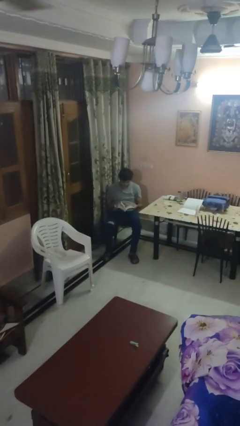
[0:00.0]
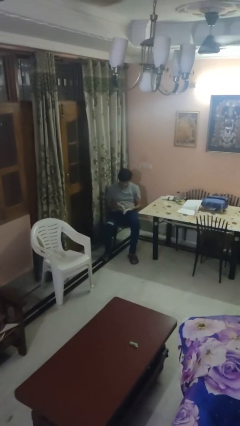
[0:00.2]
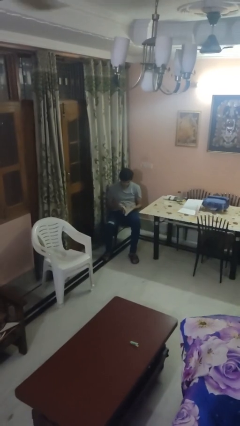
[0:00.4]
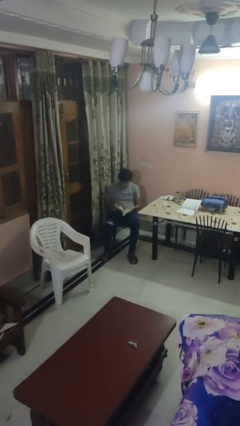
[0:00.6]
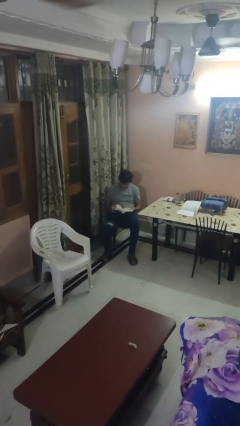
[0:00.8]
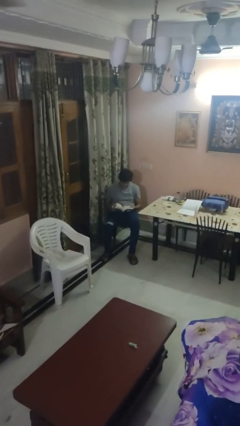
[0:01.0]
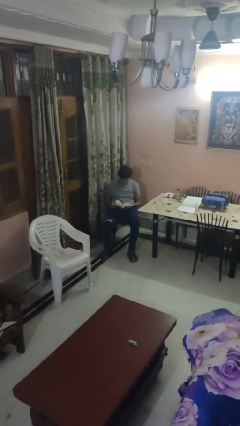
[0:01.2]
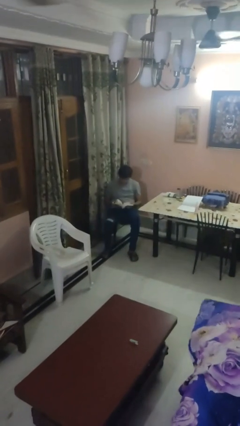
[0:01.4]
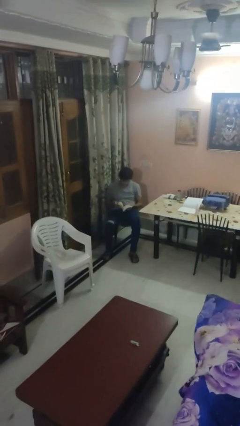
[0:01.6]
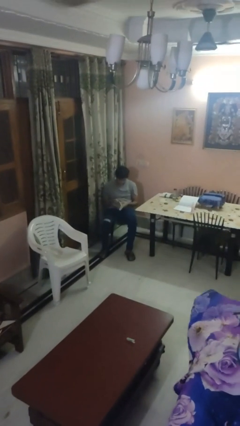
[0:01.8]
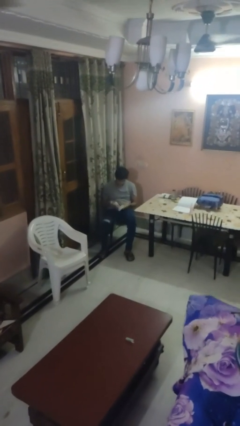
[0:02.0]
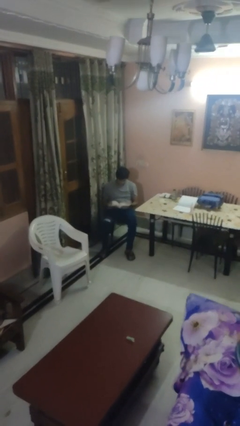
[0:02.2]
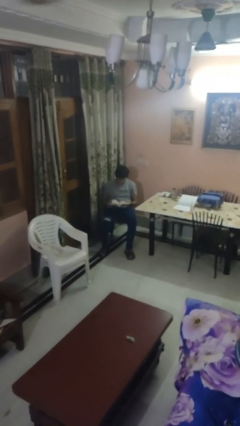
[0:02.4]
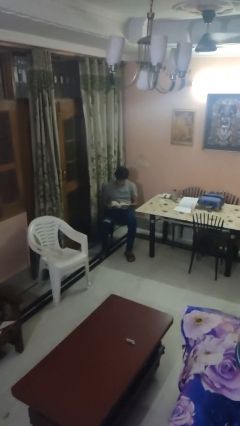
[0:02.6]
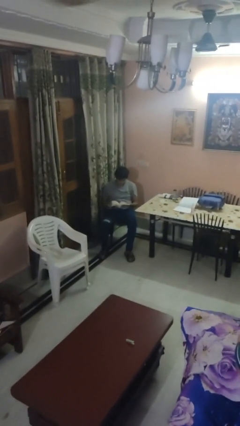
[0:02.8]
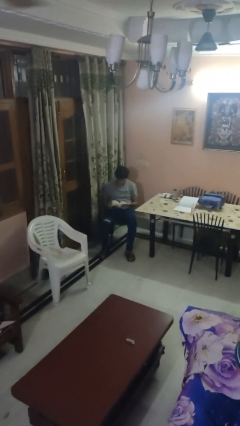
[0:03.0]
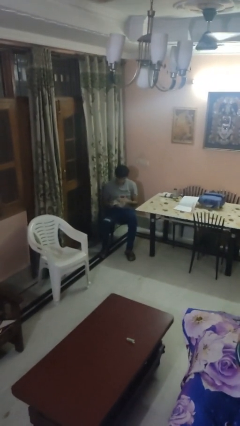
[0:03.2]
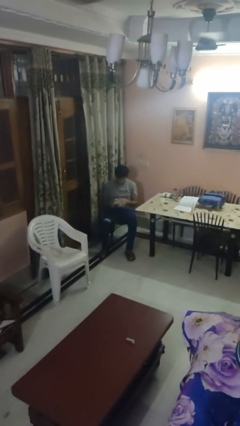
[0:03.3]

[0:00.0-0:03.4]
person reads book

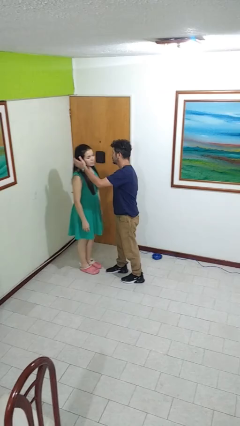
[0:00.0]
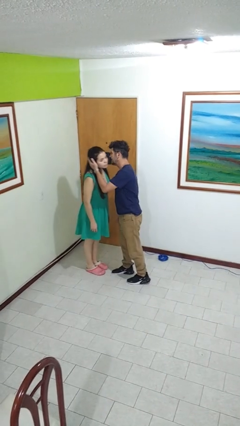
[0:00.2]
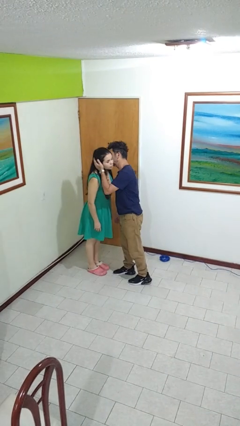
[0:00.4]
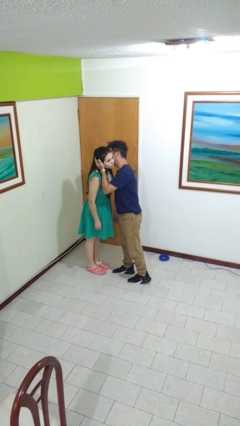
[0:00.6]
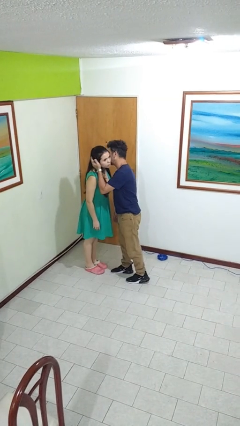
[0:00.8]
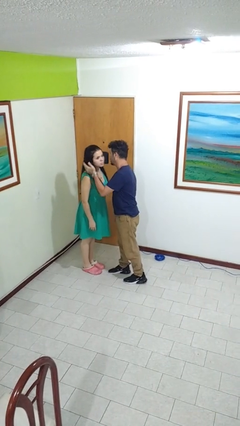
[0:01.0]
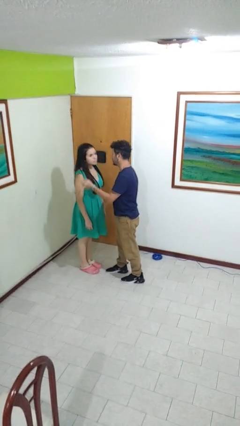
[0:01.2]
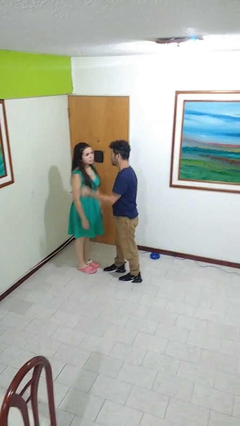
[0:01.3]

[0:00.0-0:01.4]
person kisses cheek of person

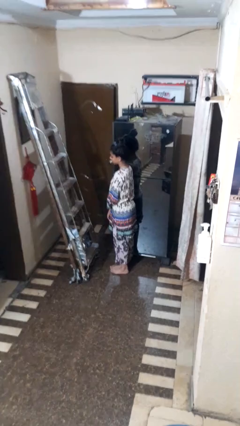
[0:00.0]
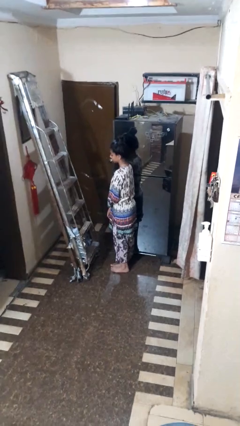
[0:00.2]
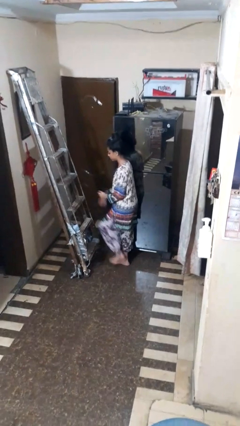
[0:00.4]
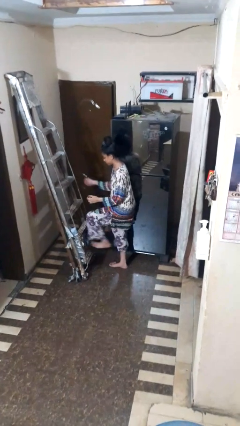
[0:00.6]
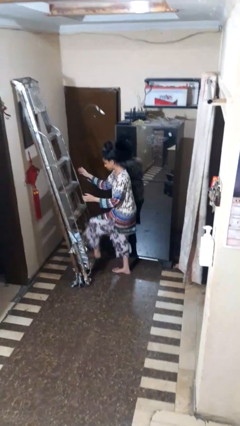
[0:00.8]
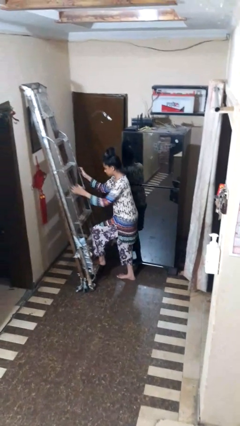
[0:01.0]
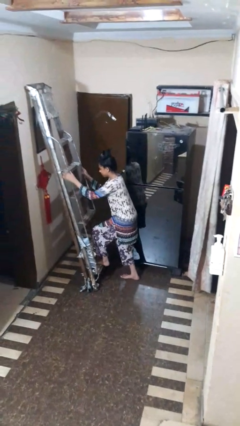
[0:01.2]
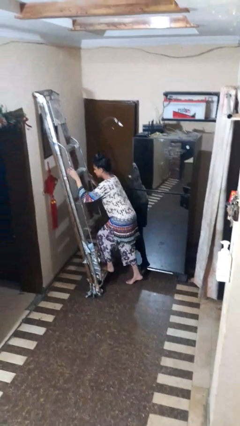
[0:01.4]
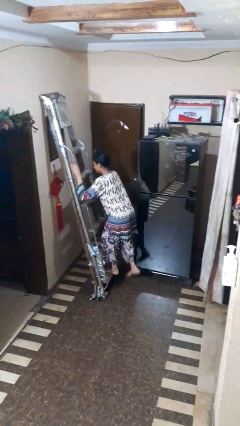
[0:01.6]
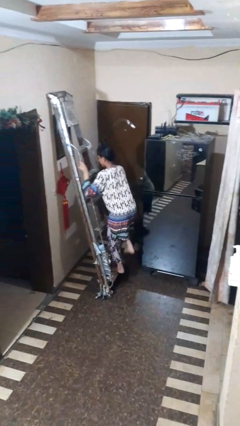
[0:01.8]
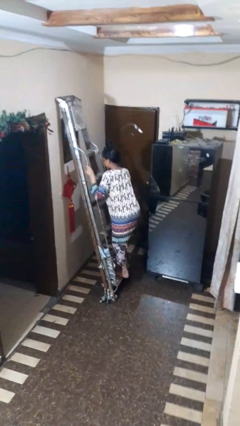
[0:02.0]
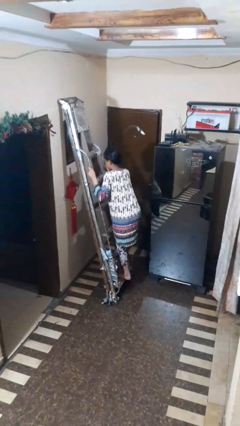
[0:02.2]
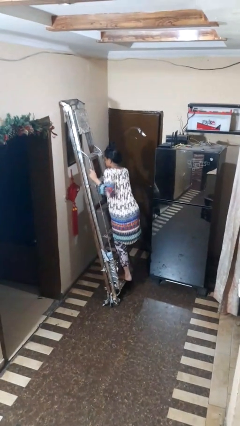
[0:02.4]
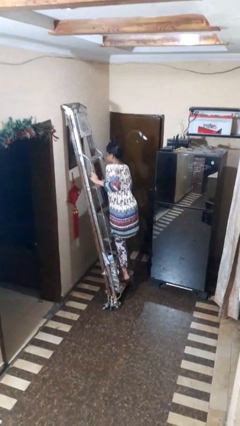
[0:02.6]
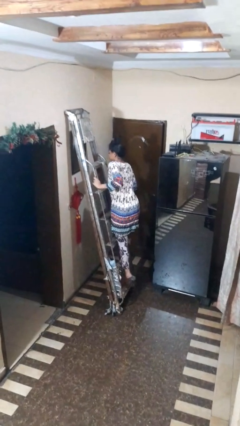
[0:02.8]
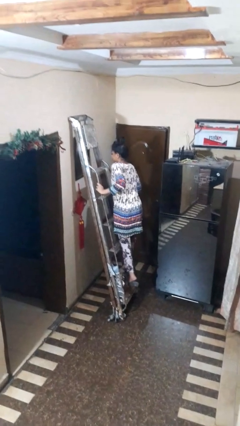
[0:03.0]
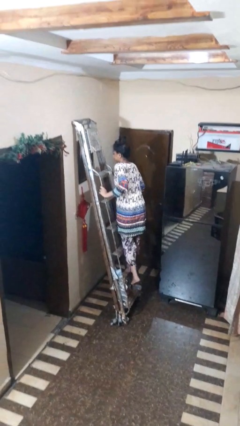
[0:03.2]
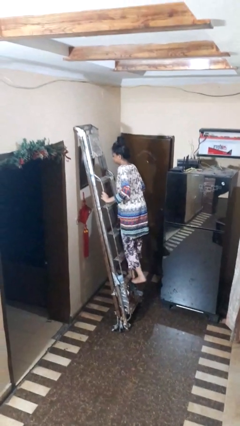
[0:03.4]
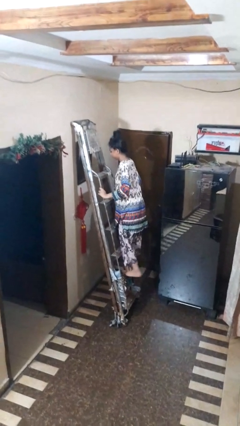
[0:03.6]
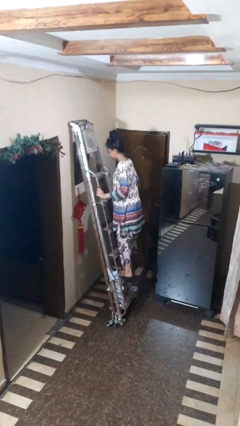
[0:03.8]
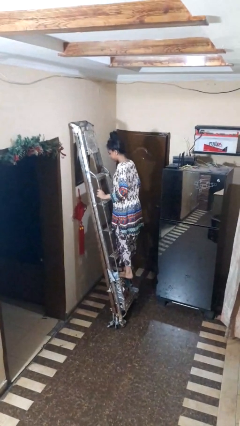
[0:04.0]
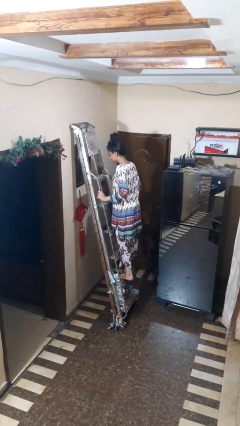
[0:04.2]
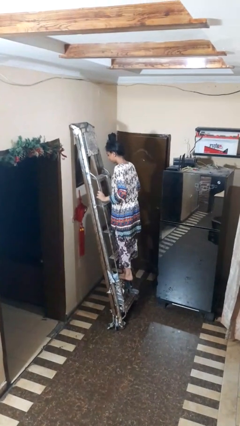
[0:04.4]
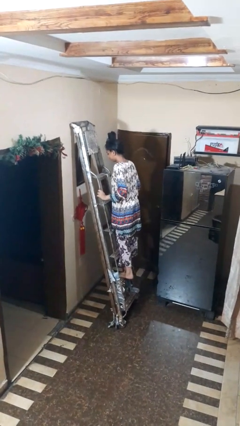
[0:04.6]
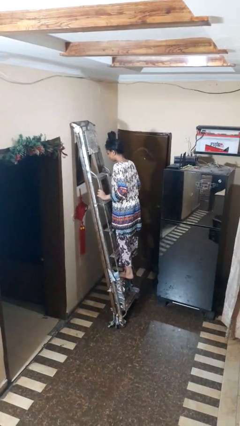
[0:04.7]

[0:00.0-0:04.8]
person climbs up ladder

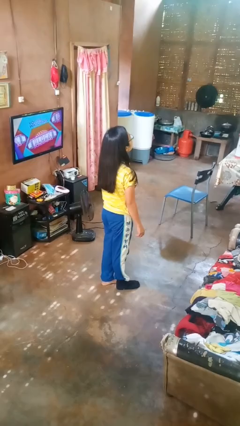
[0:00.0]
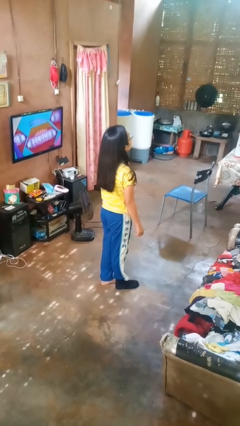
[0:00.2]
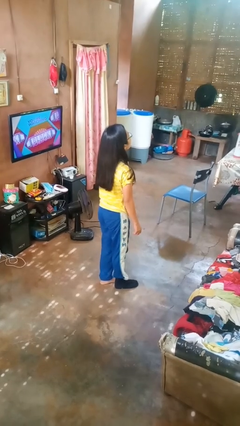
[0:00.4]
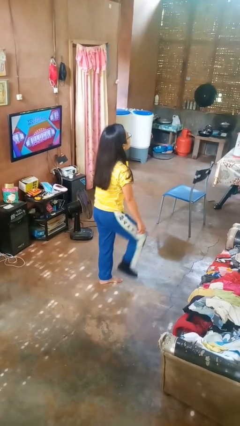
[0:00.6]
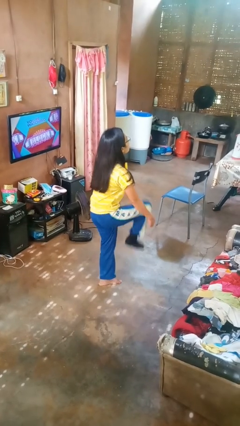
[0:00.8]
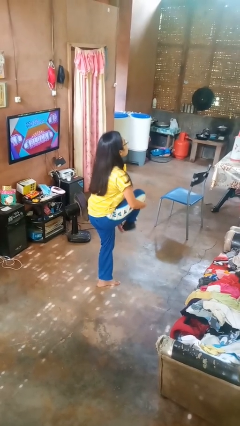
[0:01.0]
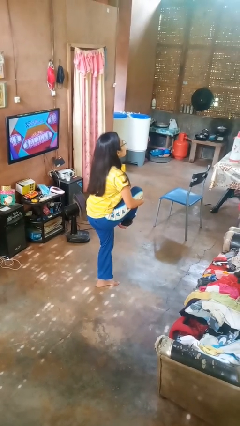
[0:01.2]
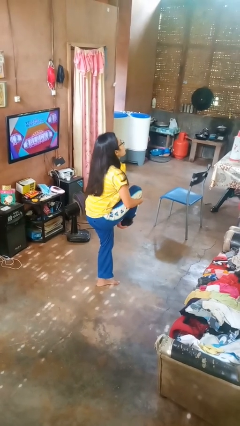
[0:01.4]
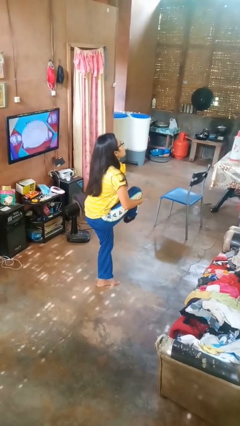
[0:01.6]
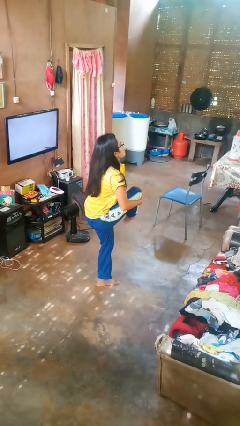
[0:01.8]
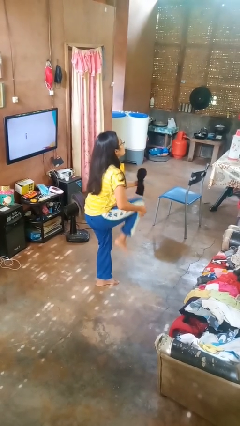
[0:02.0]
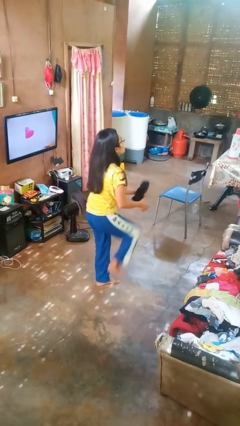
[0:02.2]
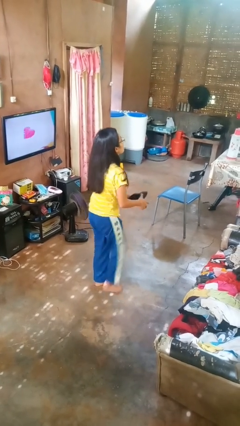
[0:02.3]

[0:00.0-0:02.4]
person takes off socks

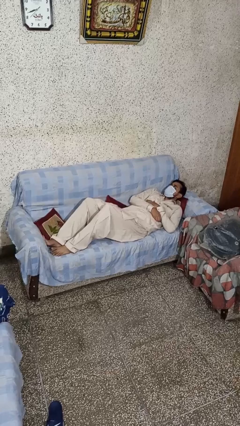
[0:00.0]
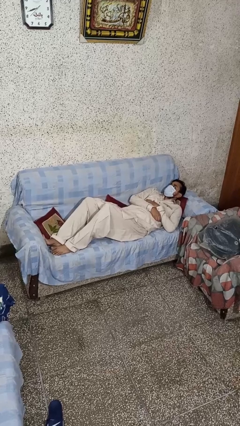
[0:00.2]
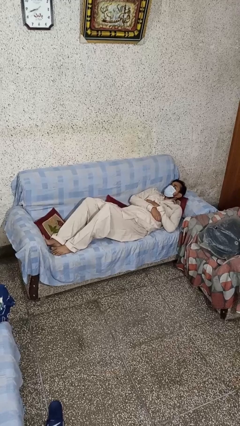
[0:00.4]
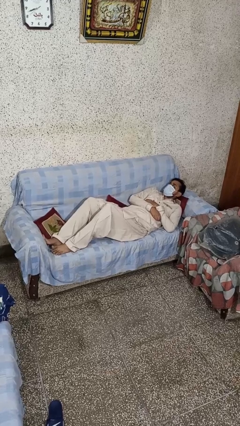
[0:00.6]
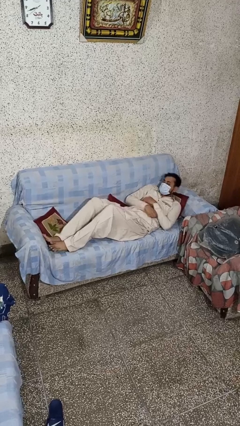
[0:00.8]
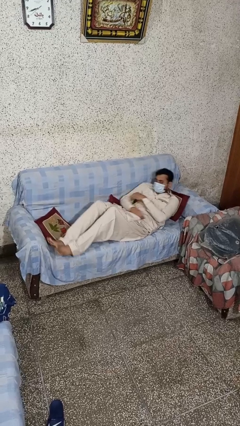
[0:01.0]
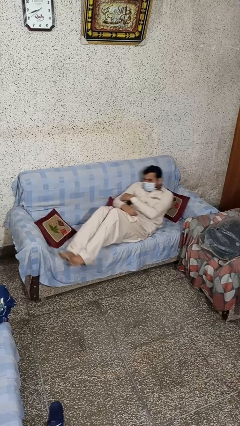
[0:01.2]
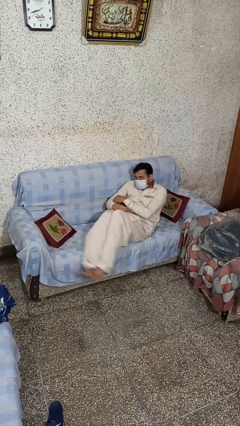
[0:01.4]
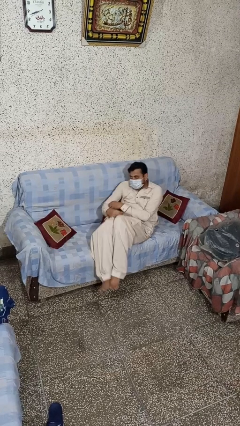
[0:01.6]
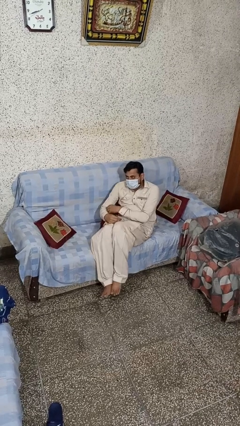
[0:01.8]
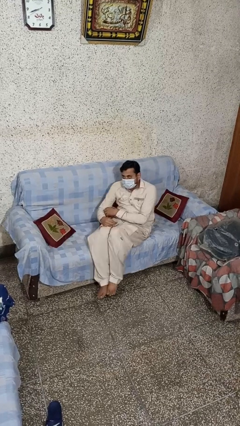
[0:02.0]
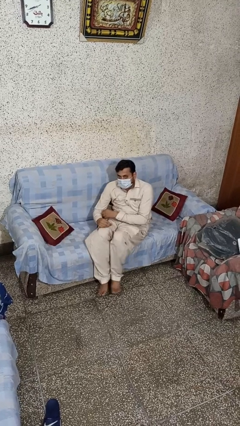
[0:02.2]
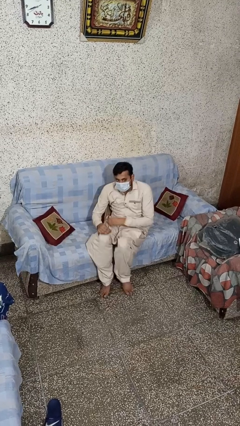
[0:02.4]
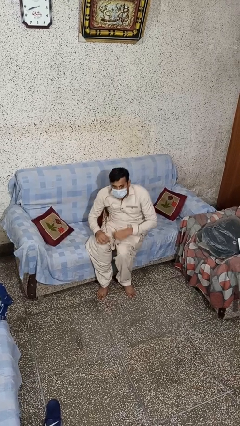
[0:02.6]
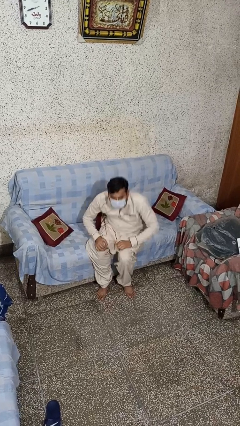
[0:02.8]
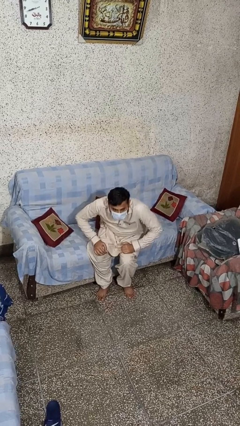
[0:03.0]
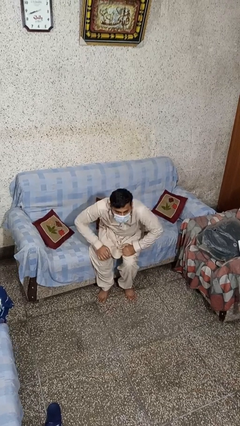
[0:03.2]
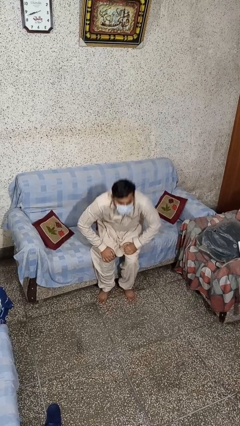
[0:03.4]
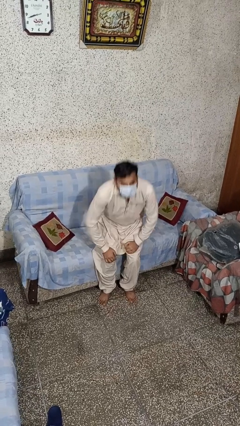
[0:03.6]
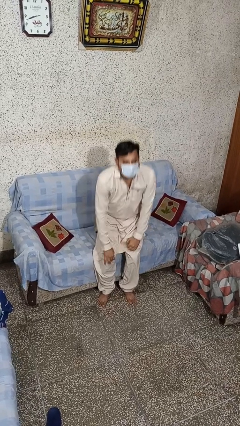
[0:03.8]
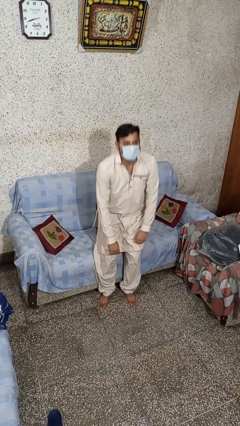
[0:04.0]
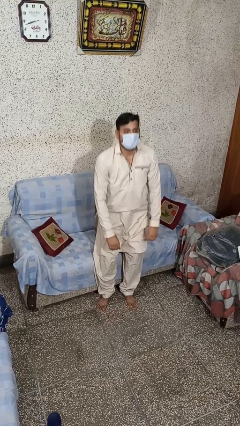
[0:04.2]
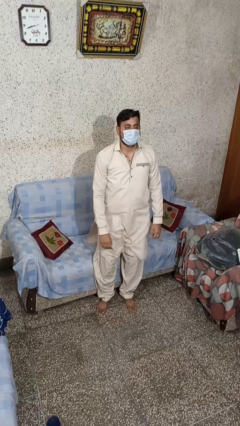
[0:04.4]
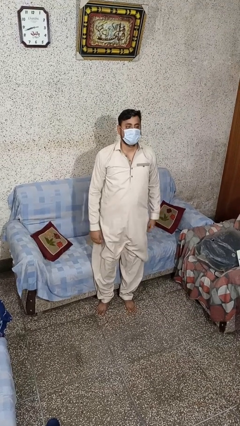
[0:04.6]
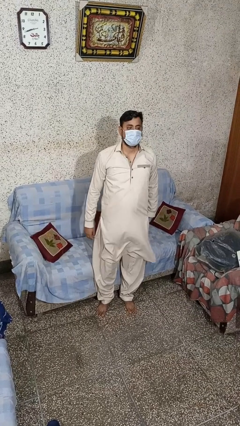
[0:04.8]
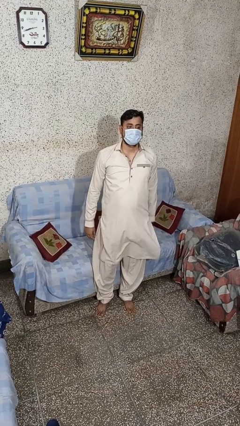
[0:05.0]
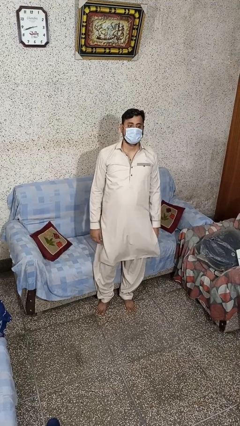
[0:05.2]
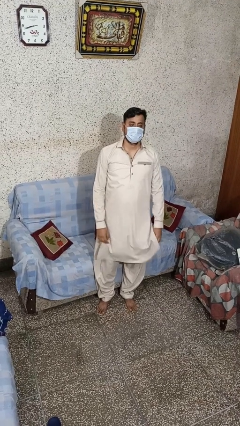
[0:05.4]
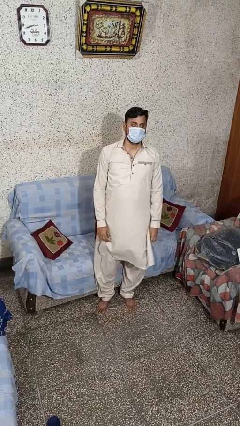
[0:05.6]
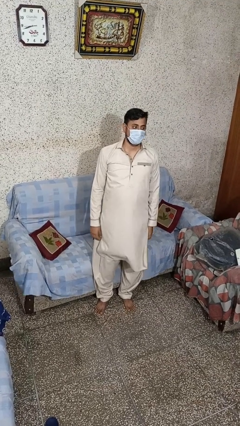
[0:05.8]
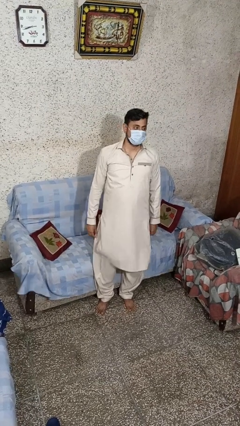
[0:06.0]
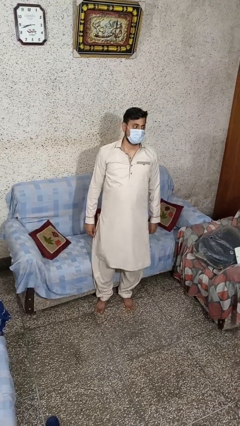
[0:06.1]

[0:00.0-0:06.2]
person stands up
